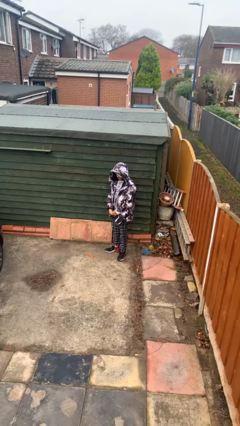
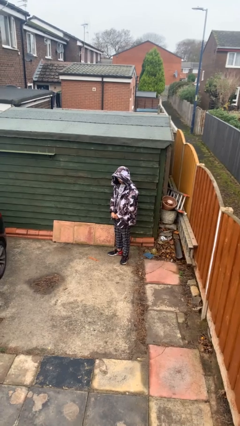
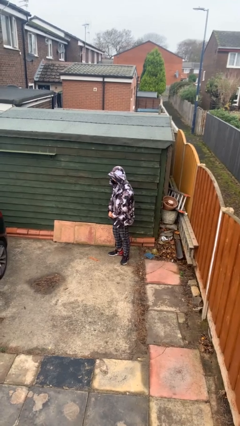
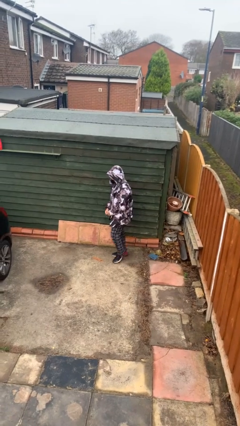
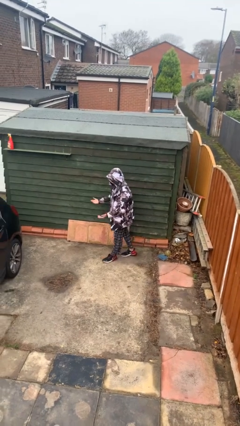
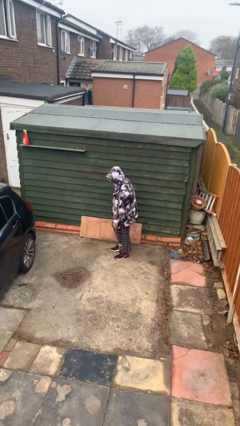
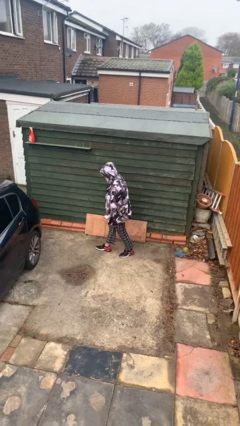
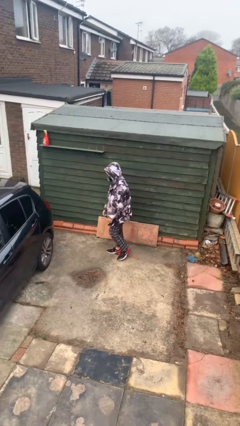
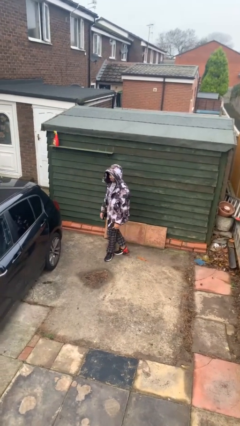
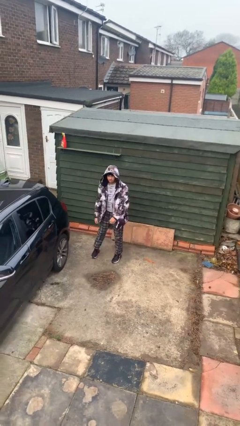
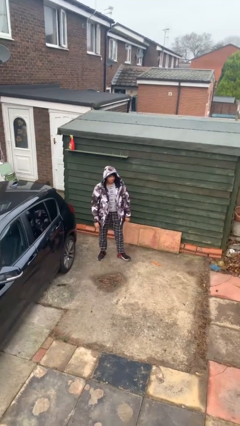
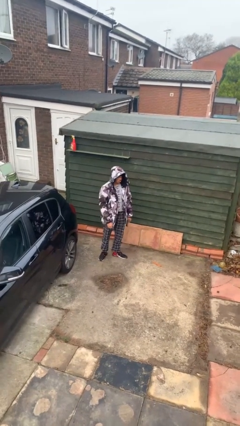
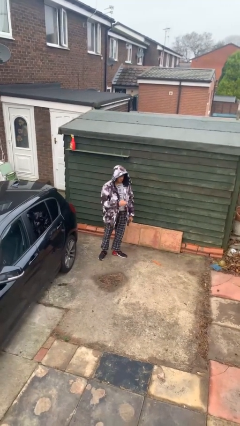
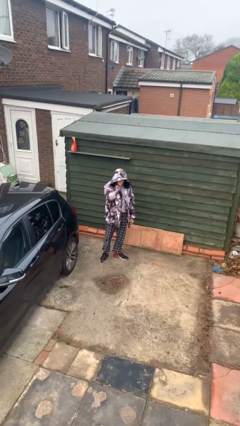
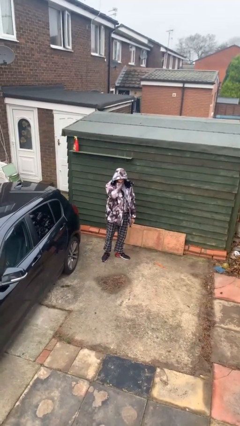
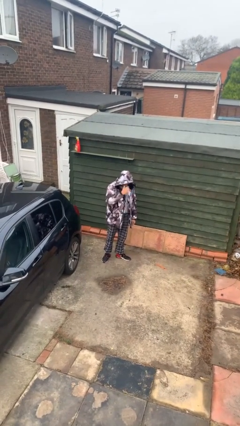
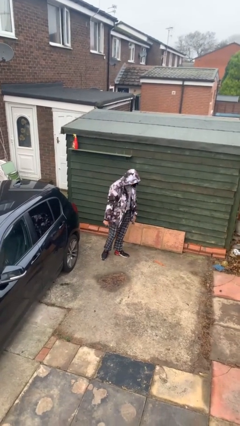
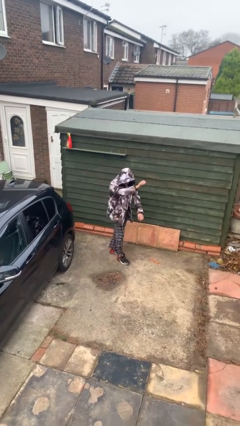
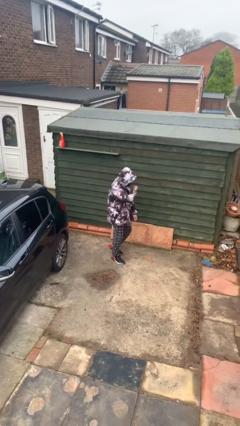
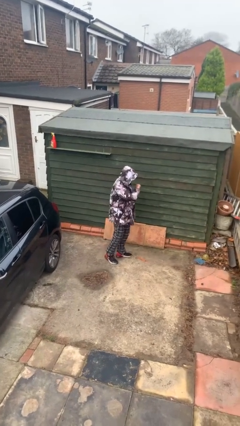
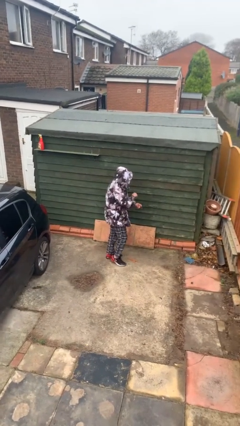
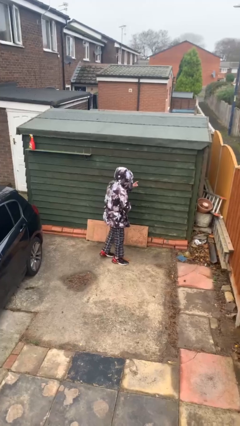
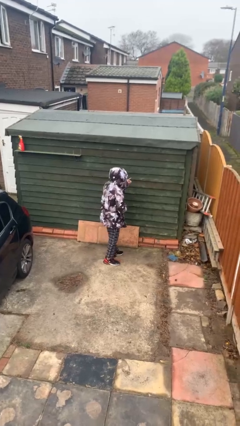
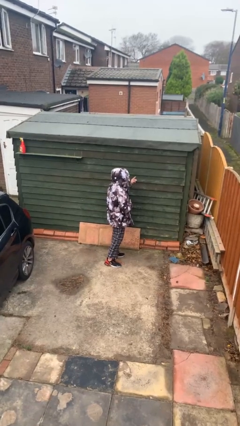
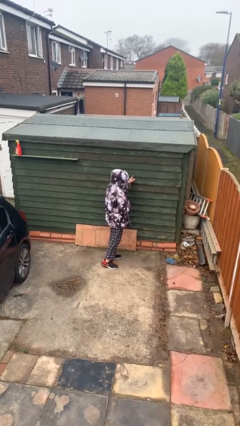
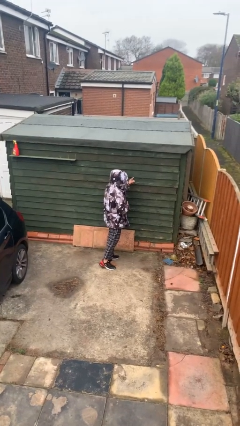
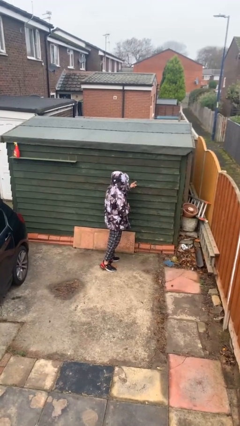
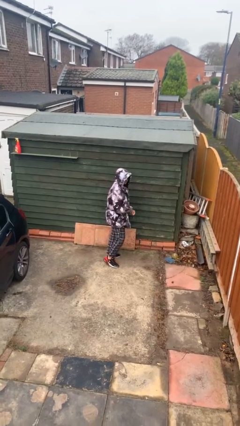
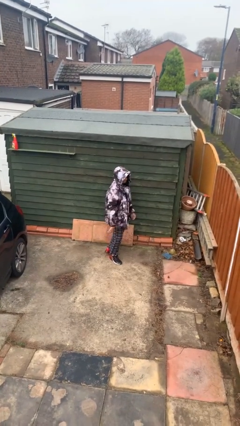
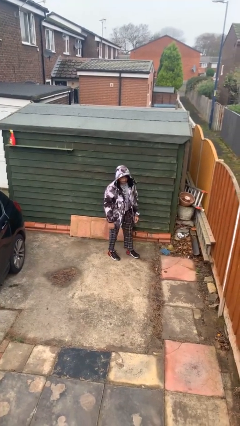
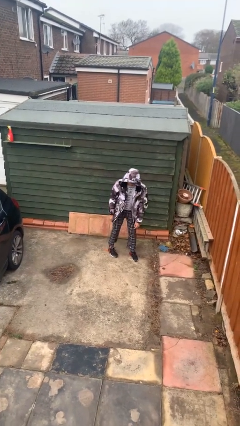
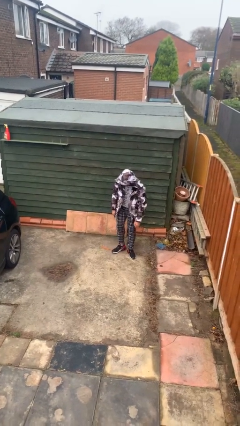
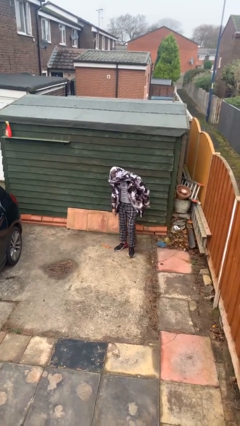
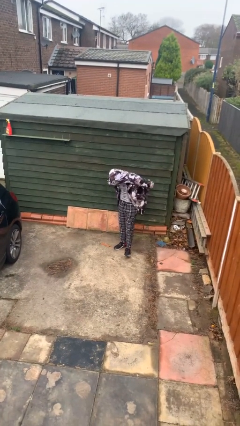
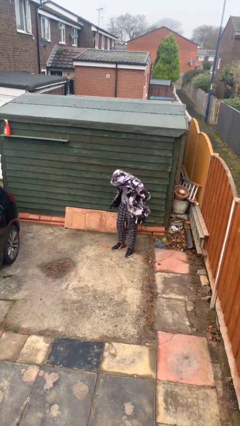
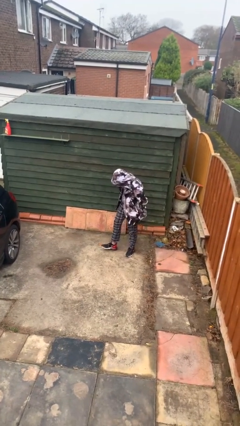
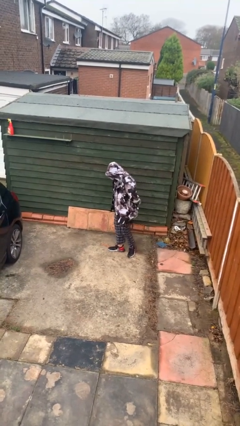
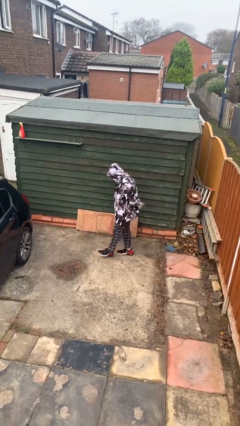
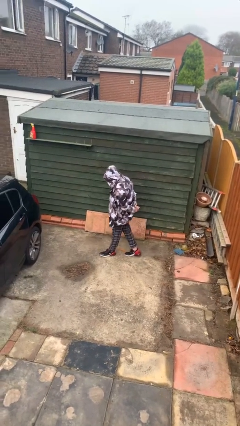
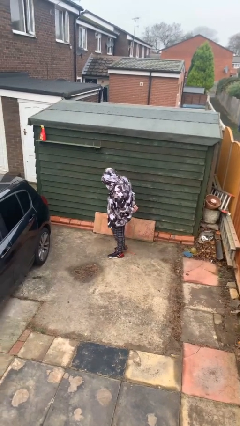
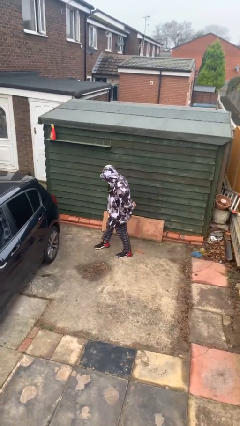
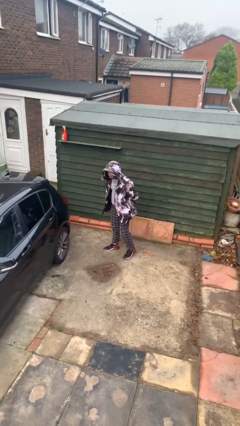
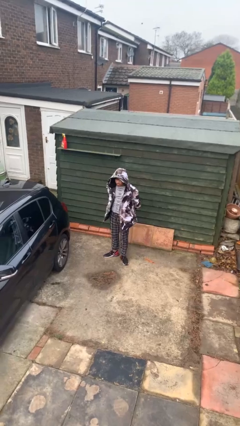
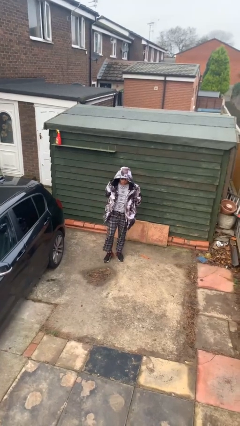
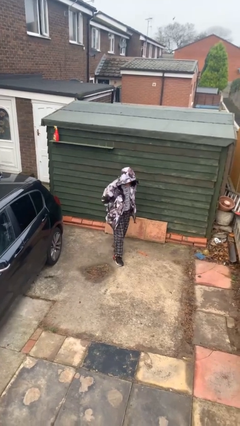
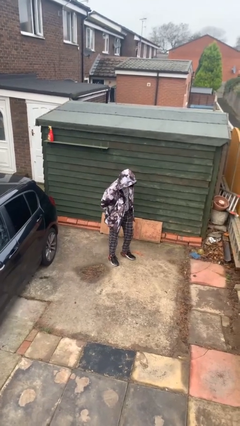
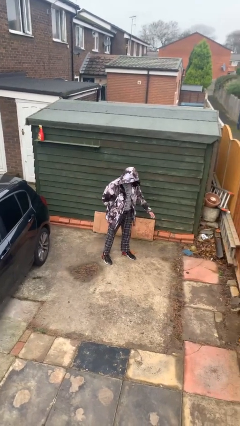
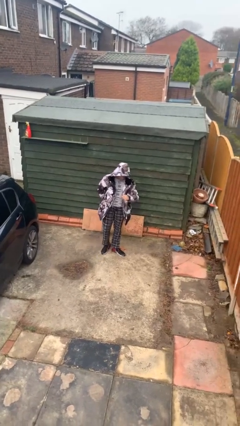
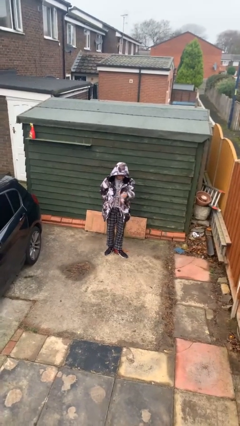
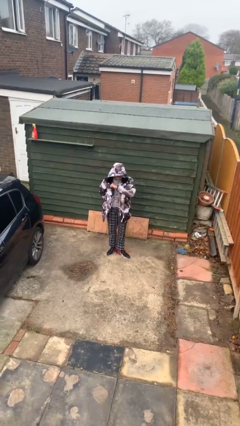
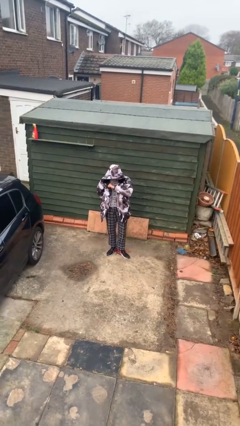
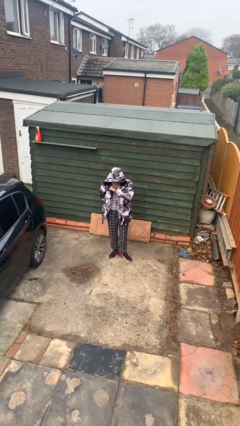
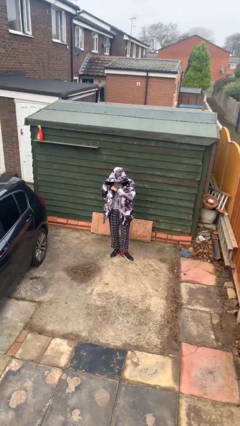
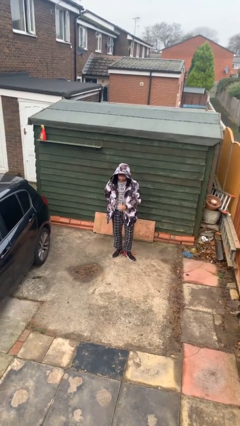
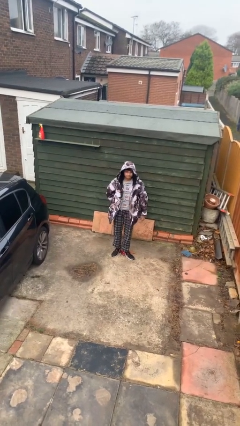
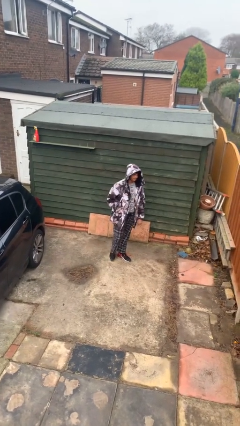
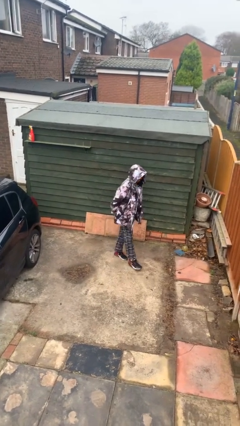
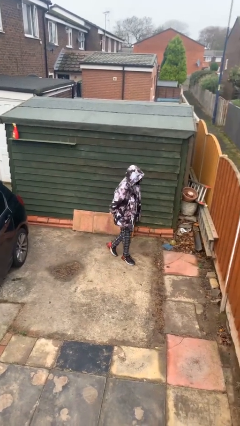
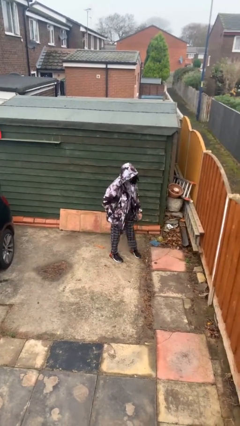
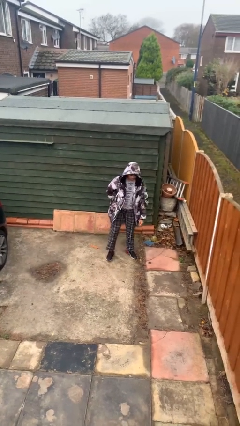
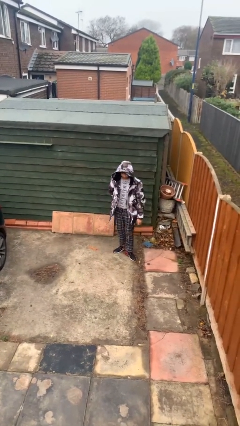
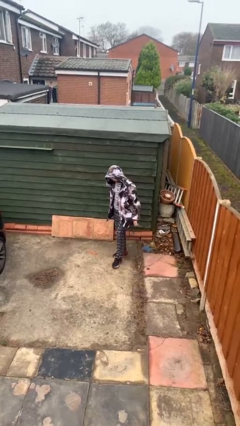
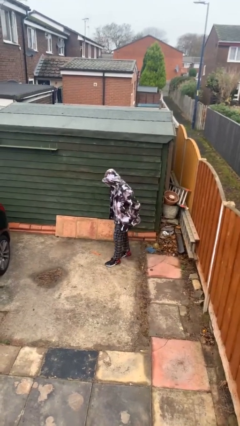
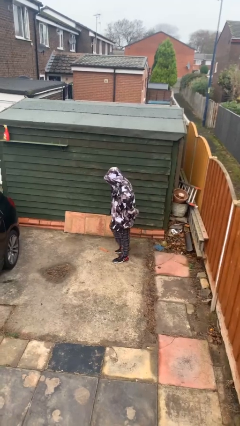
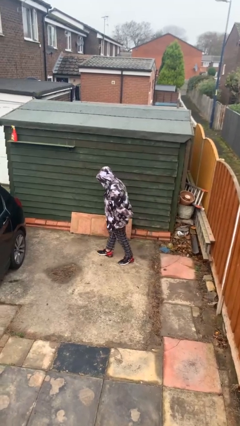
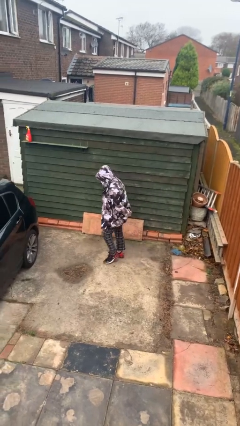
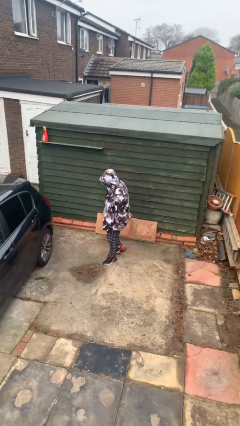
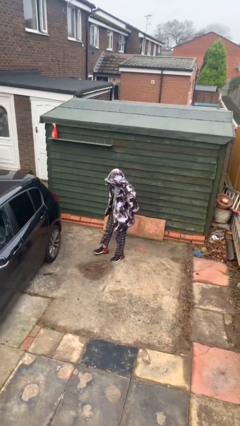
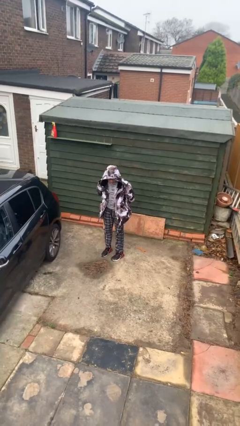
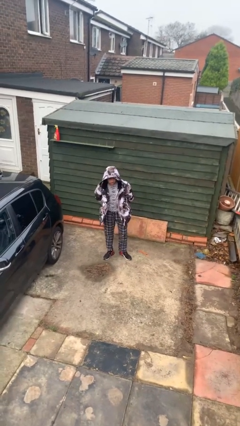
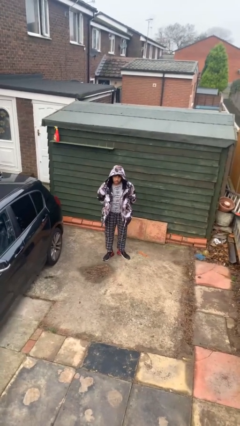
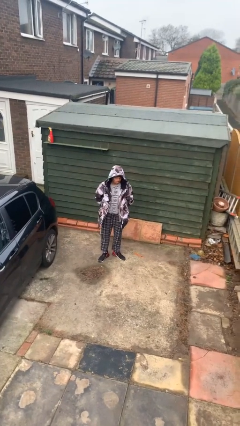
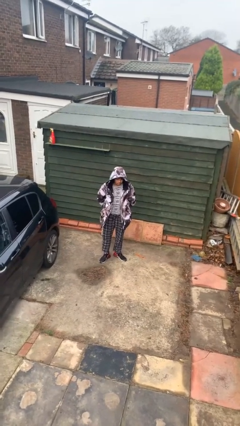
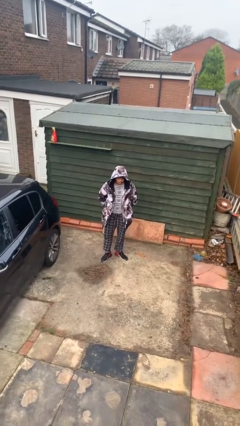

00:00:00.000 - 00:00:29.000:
person walks

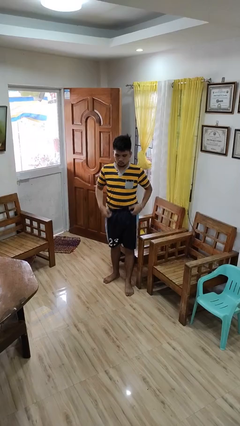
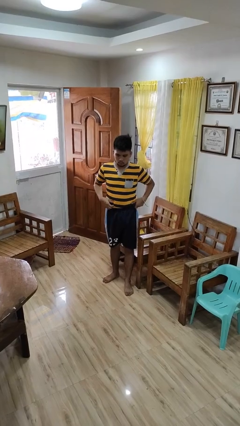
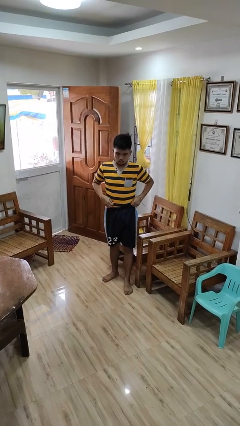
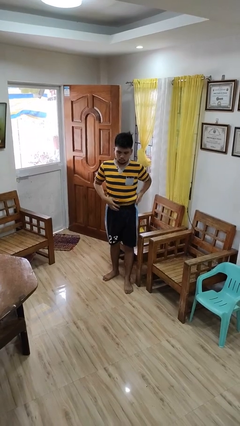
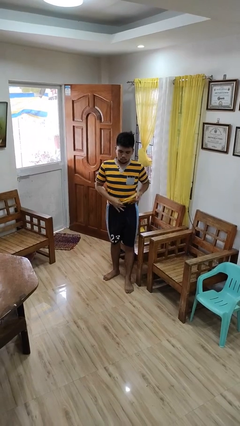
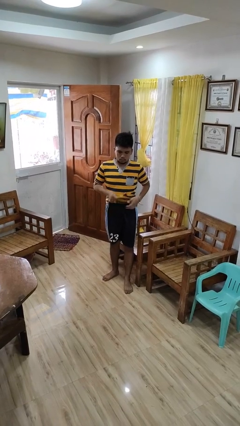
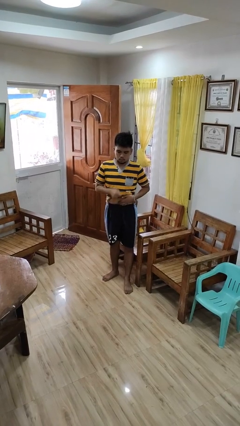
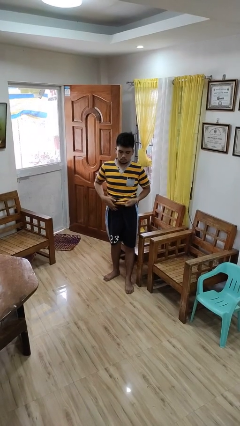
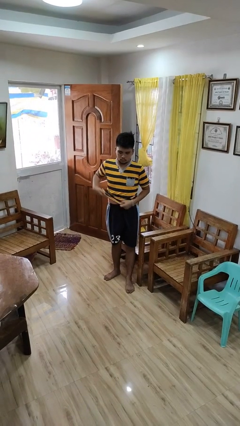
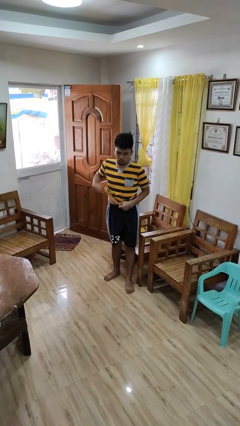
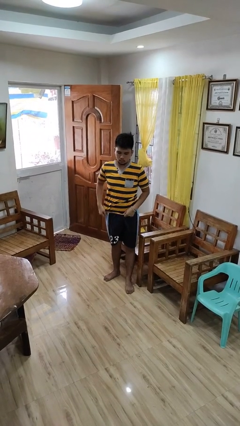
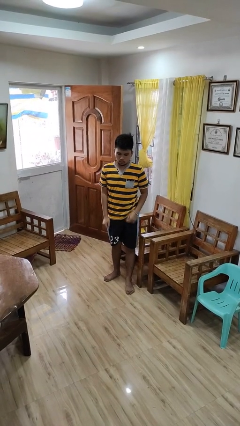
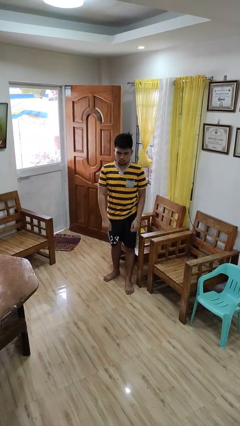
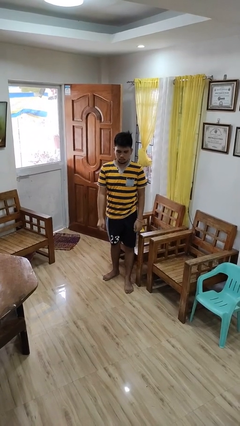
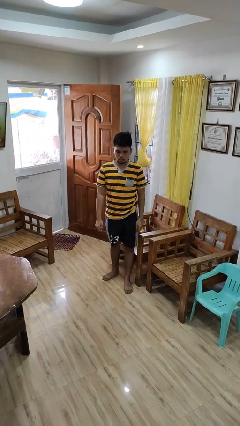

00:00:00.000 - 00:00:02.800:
person untucks shirt

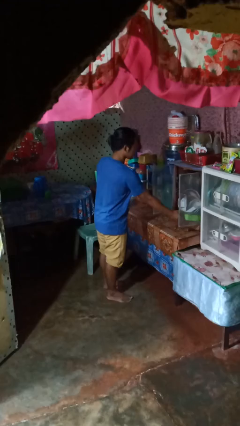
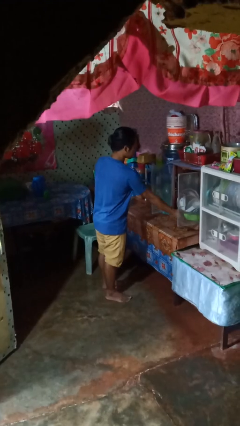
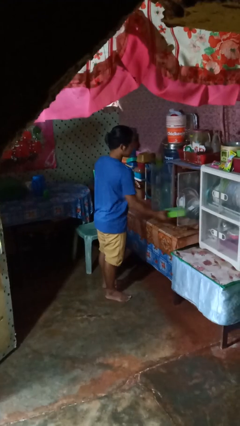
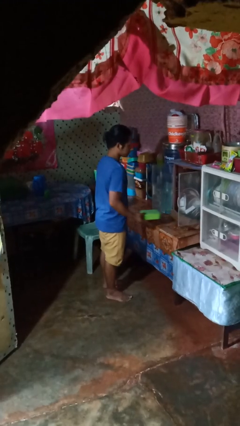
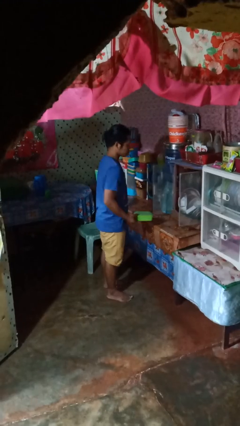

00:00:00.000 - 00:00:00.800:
person picks up object from cabinet
